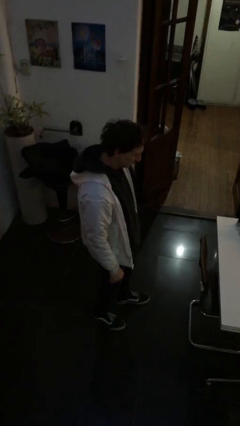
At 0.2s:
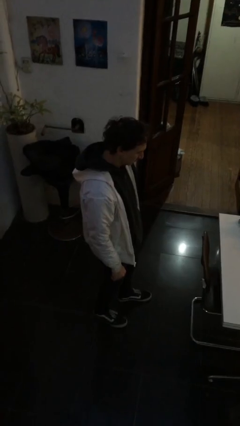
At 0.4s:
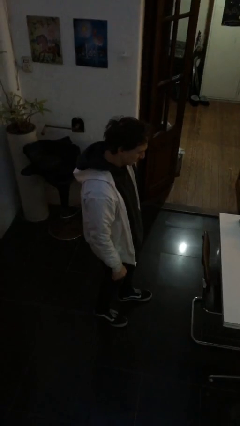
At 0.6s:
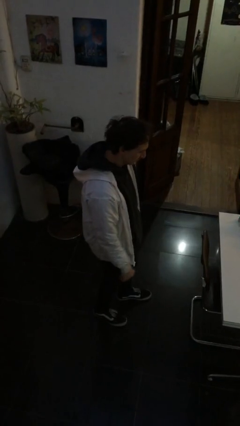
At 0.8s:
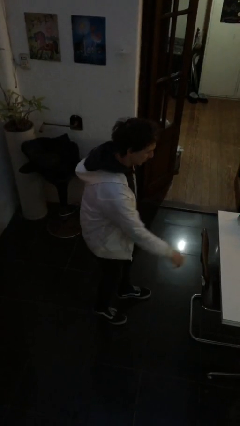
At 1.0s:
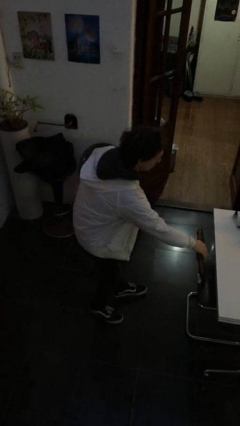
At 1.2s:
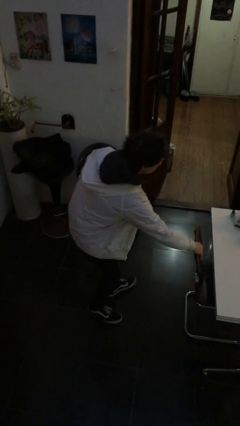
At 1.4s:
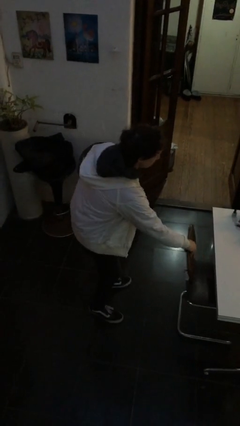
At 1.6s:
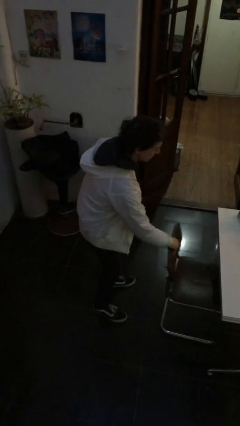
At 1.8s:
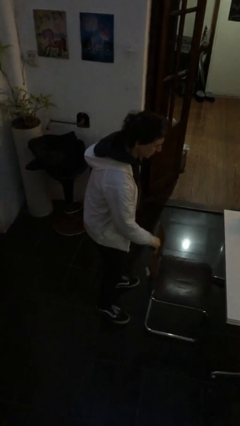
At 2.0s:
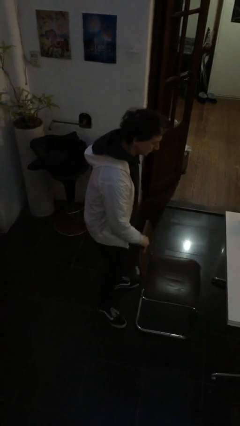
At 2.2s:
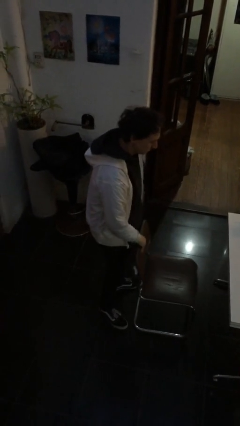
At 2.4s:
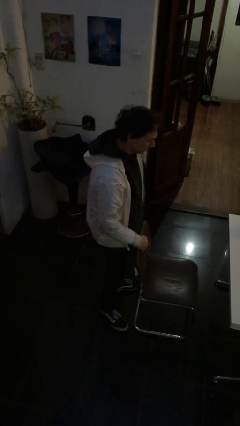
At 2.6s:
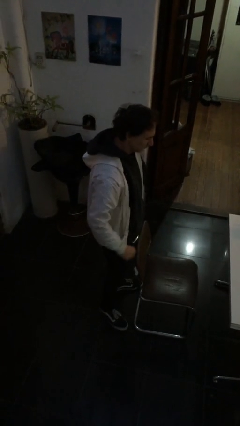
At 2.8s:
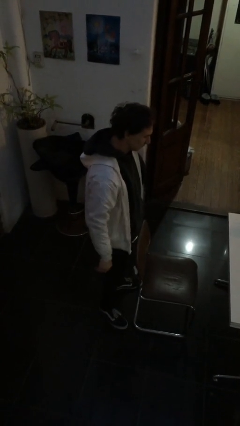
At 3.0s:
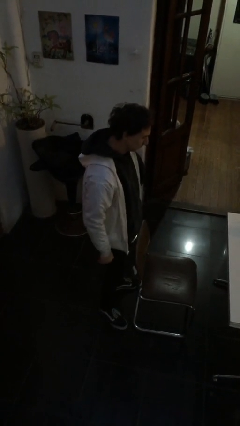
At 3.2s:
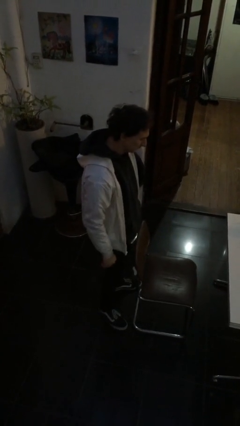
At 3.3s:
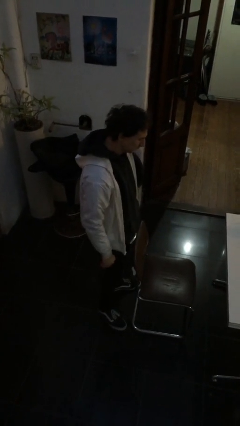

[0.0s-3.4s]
person pulls out chair

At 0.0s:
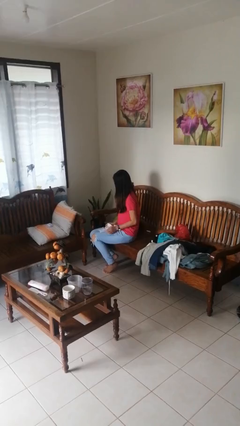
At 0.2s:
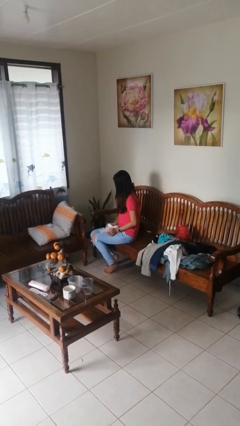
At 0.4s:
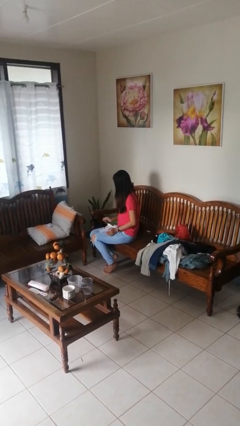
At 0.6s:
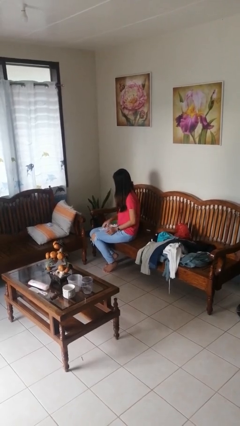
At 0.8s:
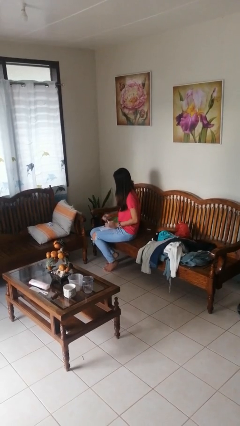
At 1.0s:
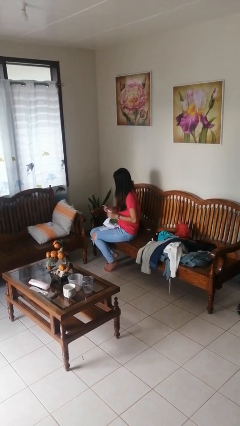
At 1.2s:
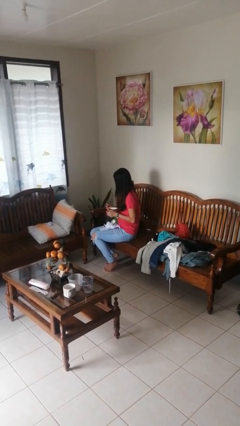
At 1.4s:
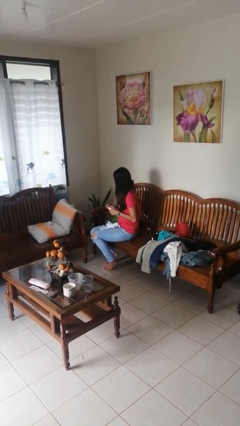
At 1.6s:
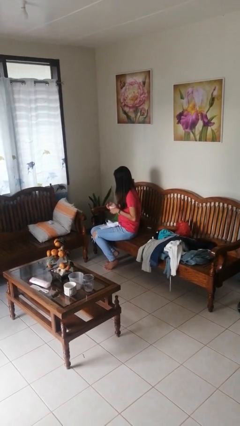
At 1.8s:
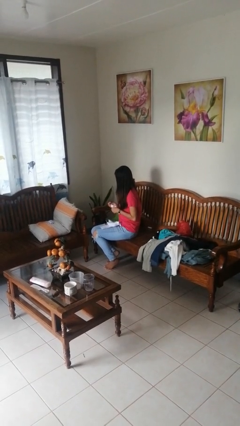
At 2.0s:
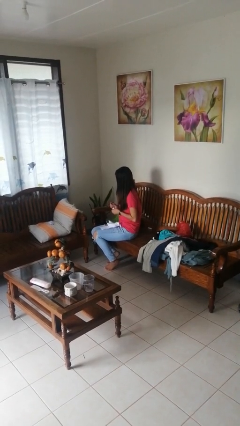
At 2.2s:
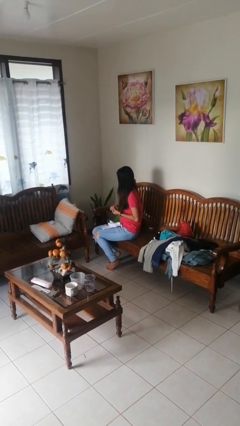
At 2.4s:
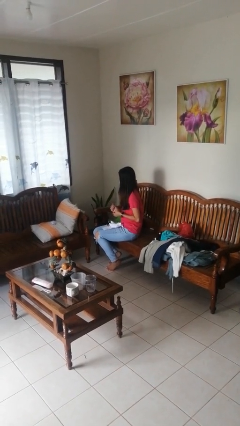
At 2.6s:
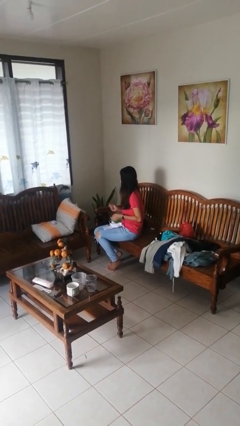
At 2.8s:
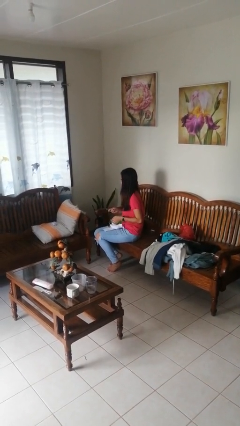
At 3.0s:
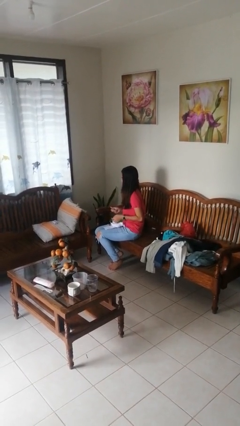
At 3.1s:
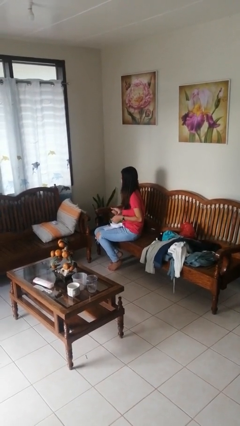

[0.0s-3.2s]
person crumples paper

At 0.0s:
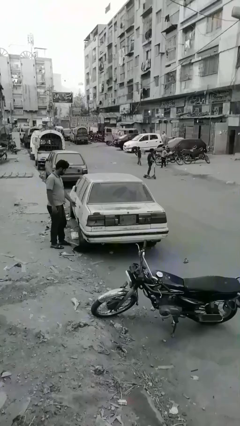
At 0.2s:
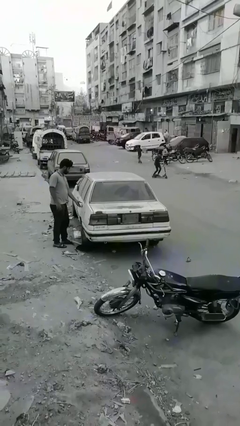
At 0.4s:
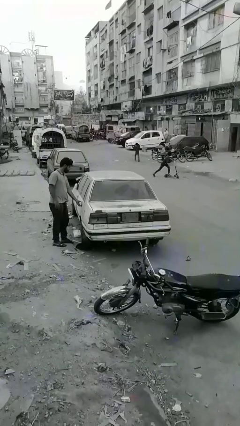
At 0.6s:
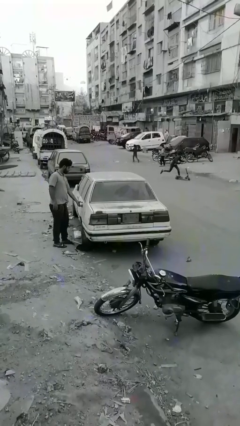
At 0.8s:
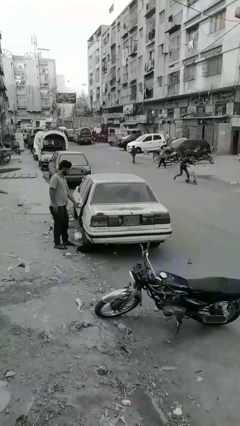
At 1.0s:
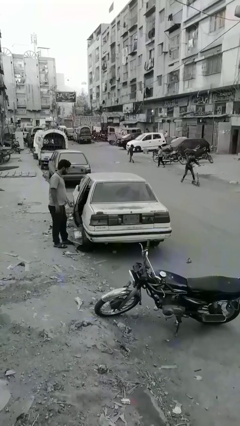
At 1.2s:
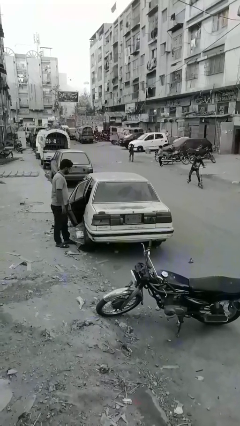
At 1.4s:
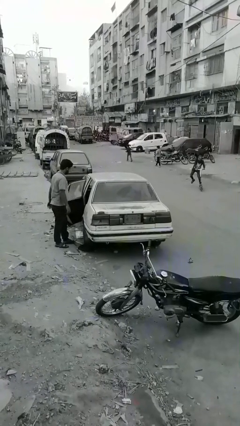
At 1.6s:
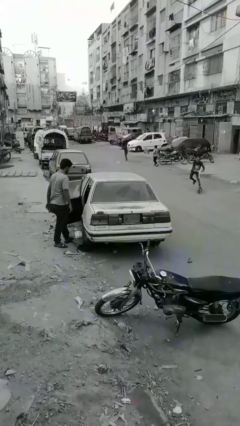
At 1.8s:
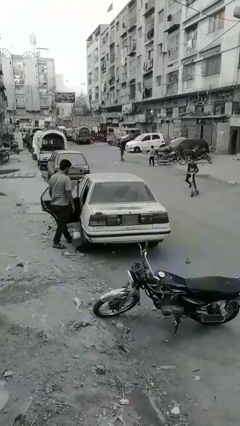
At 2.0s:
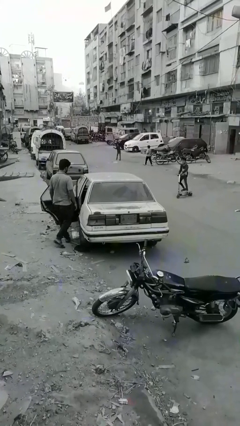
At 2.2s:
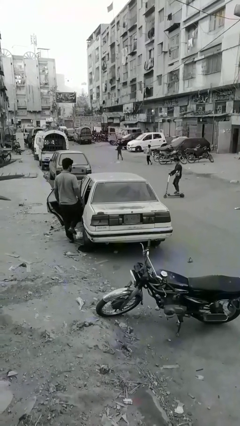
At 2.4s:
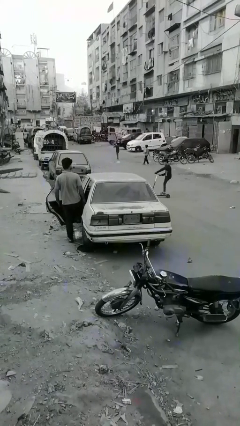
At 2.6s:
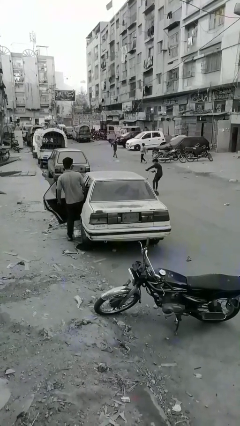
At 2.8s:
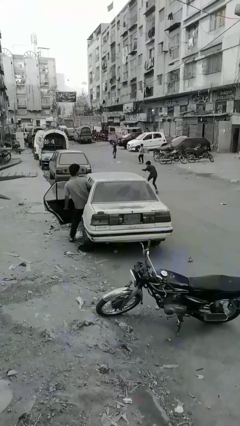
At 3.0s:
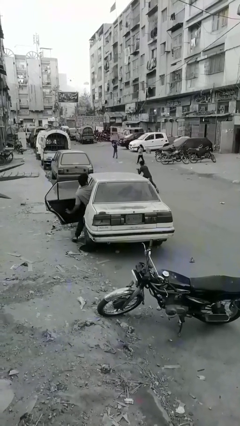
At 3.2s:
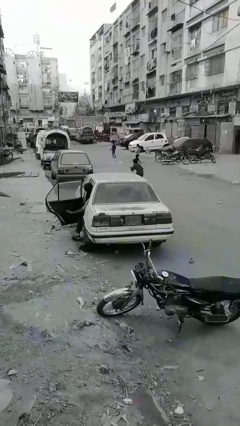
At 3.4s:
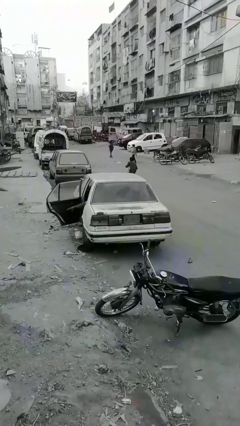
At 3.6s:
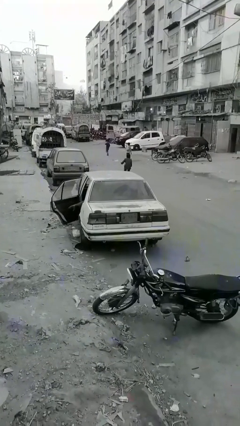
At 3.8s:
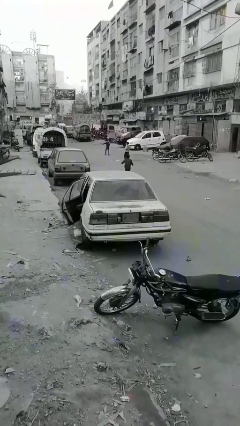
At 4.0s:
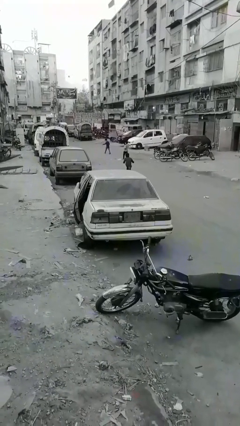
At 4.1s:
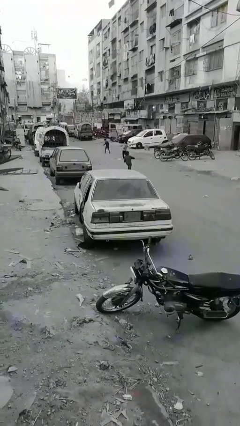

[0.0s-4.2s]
car picks up person

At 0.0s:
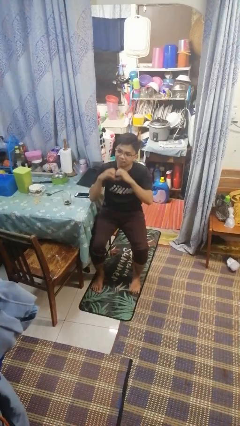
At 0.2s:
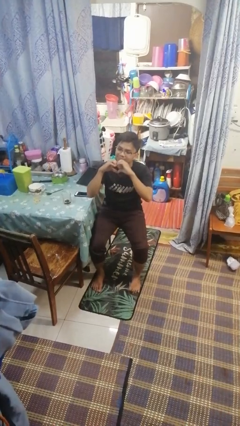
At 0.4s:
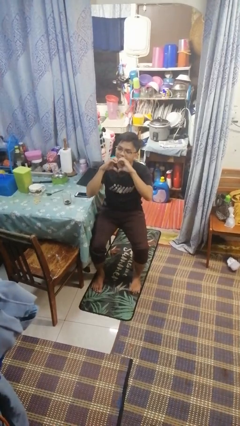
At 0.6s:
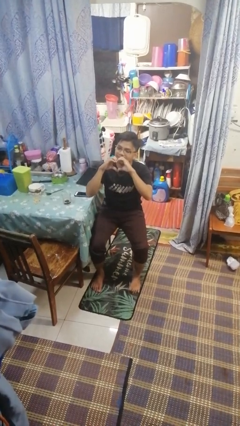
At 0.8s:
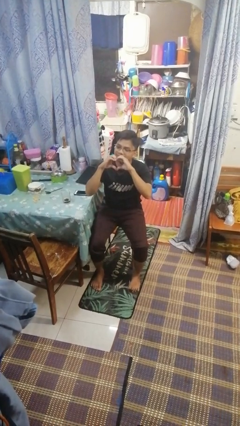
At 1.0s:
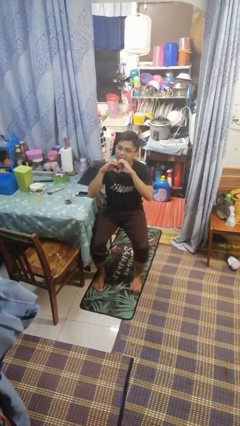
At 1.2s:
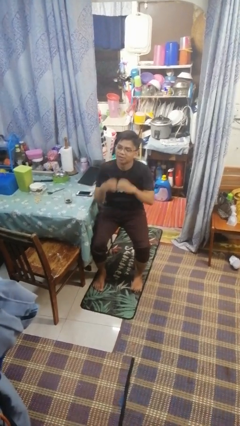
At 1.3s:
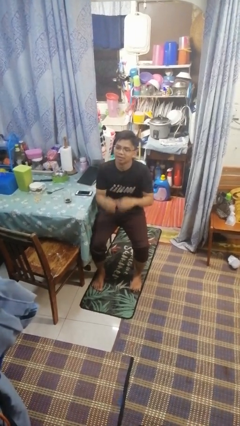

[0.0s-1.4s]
person gestures heart

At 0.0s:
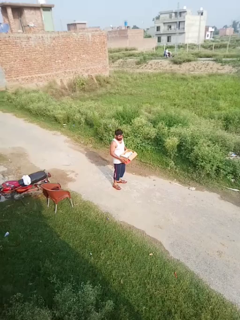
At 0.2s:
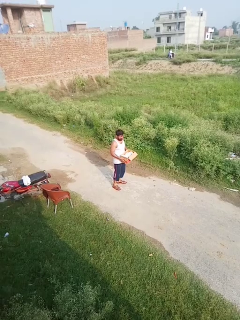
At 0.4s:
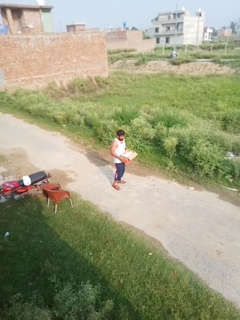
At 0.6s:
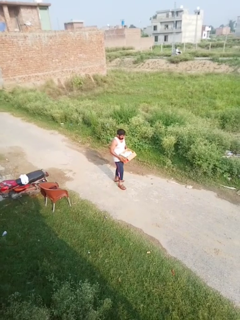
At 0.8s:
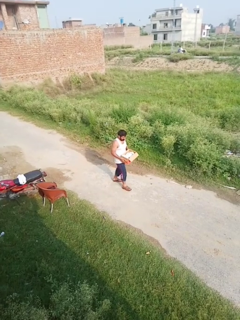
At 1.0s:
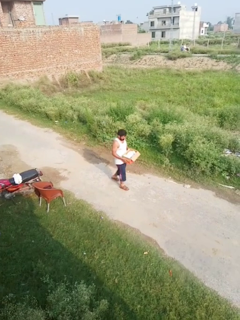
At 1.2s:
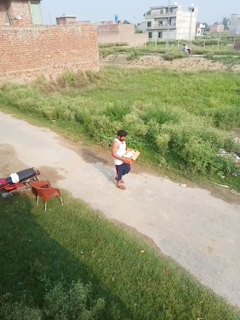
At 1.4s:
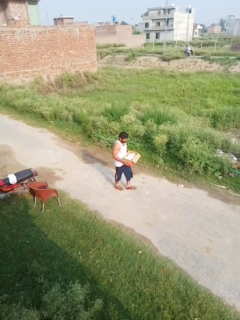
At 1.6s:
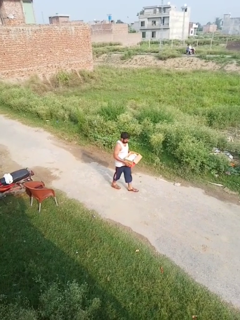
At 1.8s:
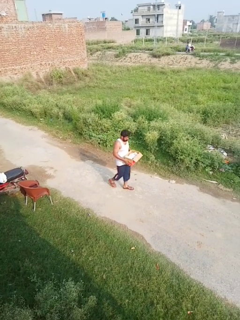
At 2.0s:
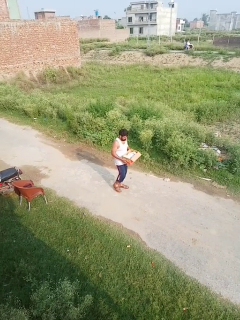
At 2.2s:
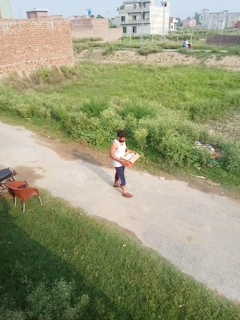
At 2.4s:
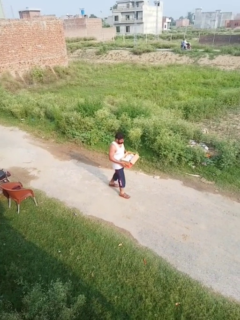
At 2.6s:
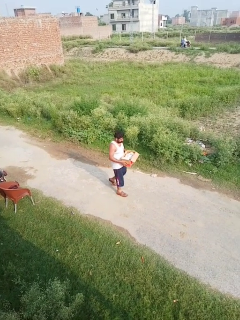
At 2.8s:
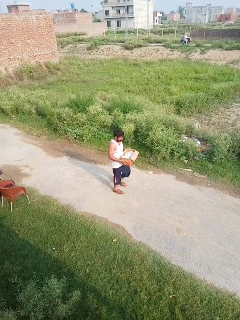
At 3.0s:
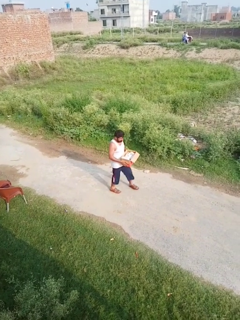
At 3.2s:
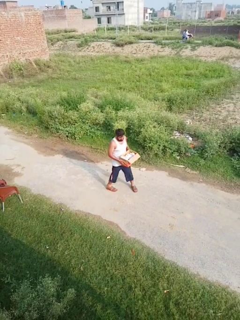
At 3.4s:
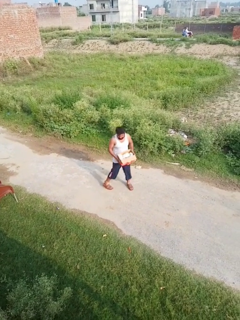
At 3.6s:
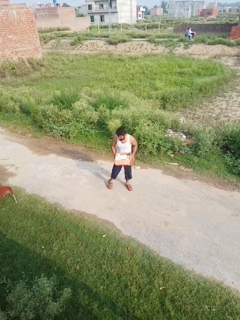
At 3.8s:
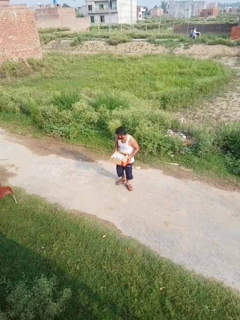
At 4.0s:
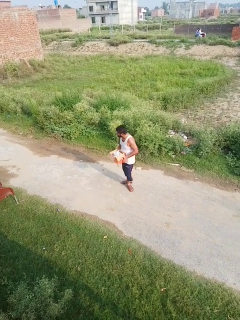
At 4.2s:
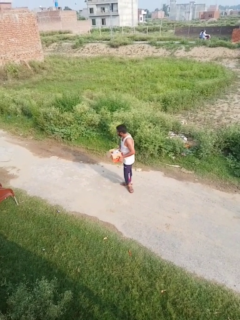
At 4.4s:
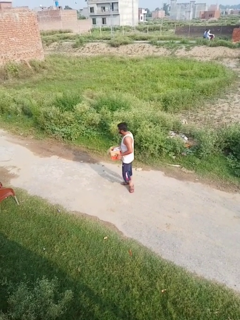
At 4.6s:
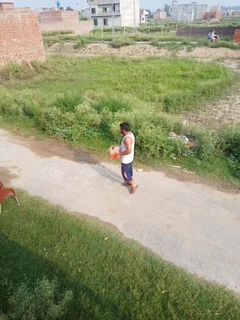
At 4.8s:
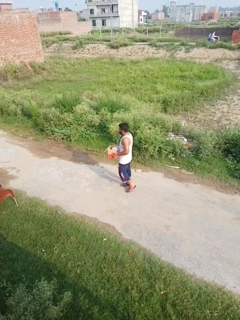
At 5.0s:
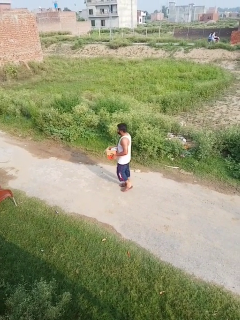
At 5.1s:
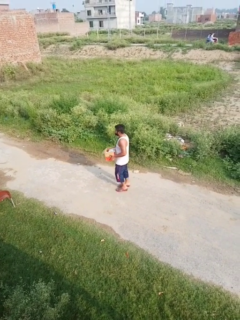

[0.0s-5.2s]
person carries laundry basket

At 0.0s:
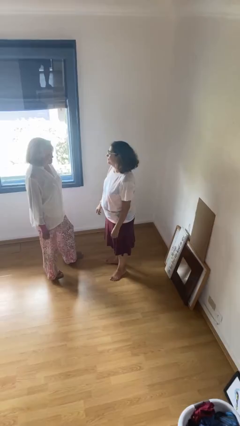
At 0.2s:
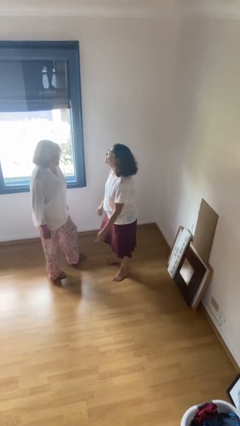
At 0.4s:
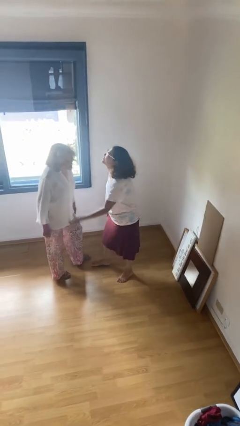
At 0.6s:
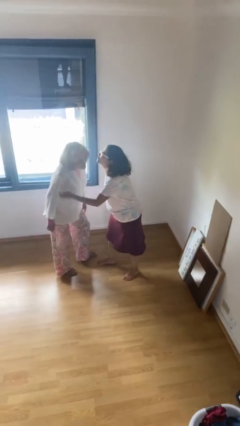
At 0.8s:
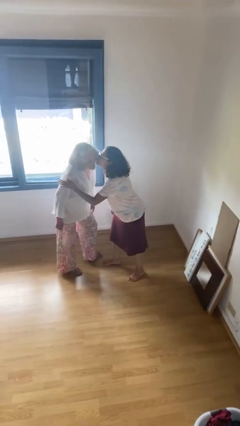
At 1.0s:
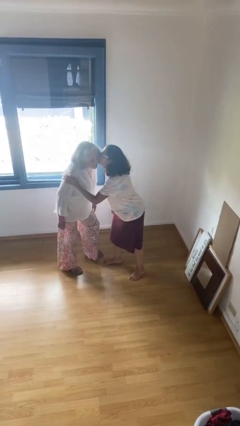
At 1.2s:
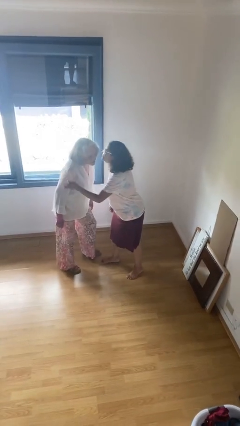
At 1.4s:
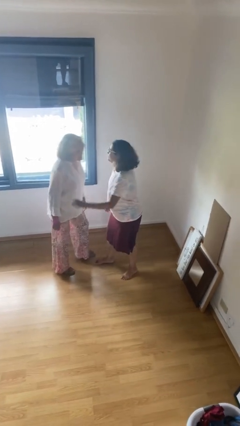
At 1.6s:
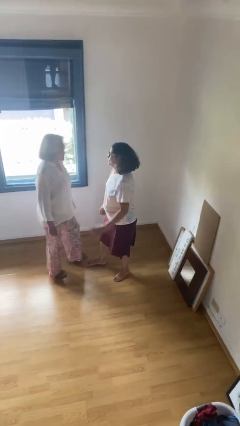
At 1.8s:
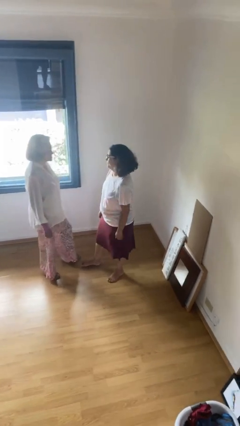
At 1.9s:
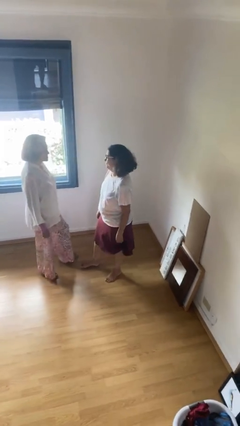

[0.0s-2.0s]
person kisses cheek of person
